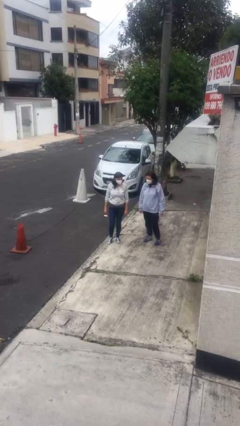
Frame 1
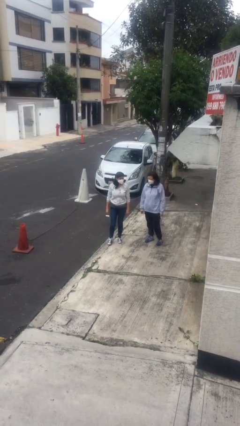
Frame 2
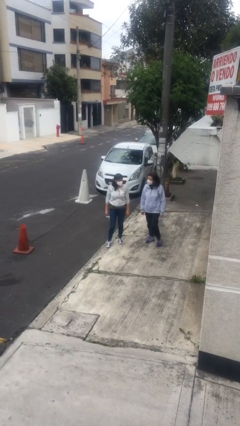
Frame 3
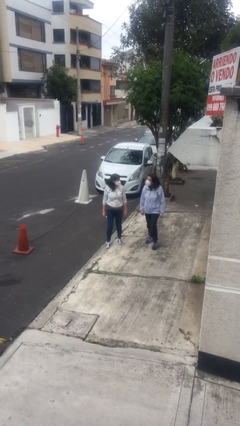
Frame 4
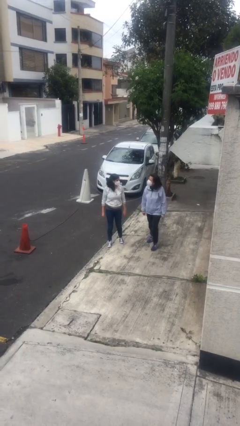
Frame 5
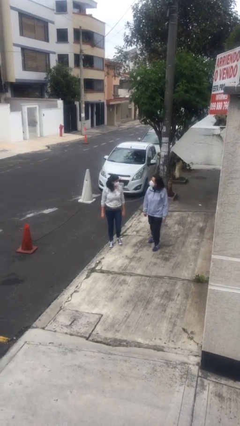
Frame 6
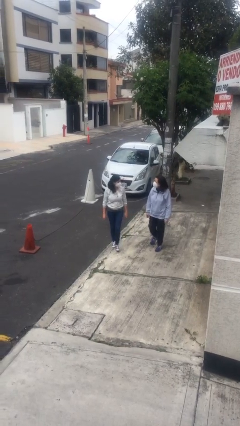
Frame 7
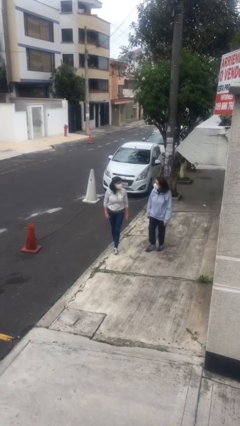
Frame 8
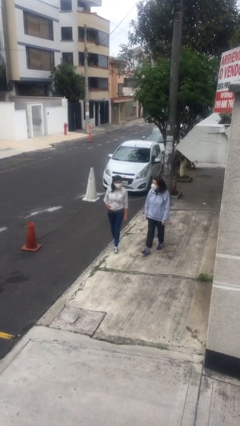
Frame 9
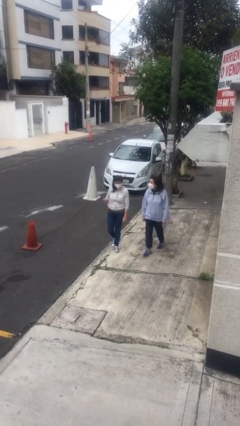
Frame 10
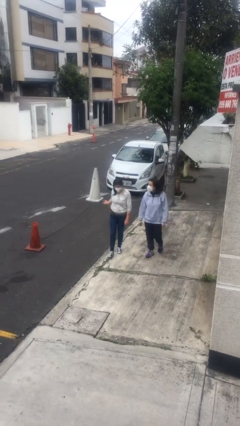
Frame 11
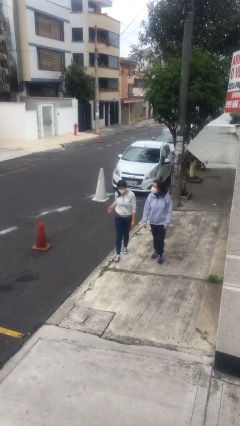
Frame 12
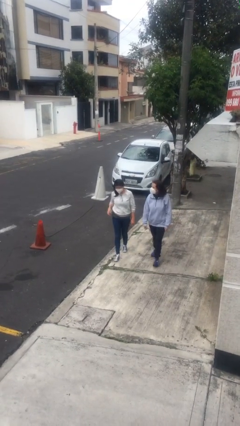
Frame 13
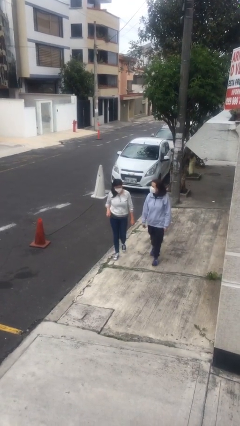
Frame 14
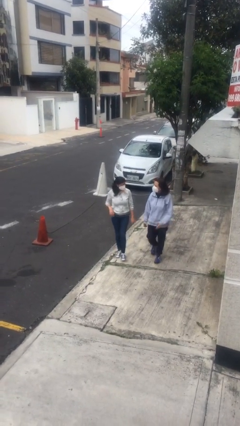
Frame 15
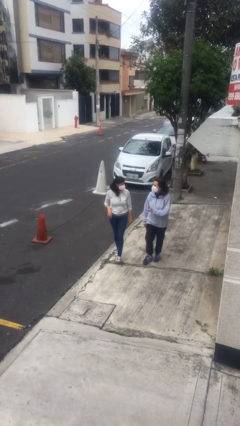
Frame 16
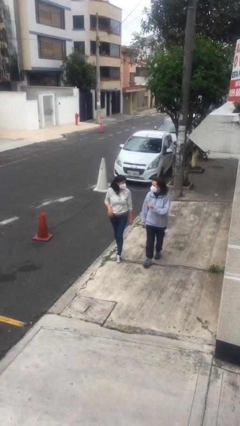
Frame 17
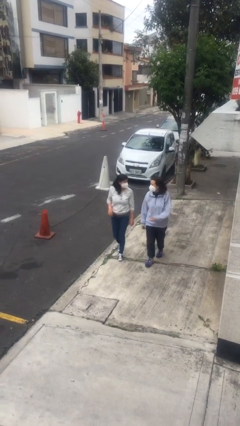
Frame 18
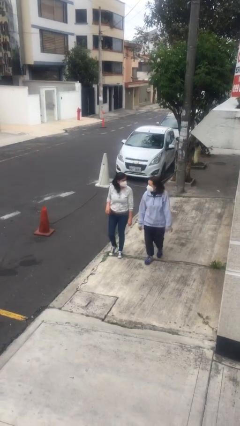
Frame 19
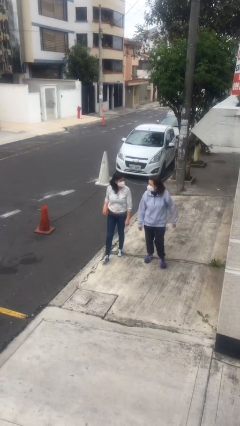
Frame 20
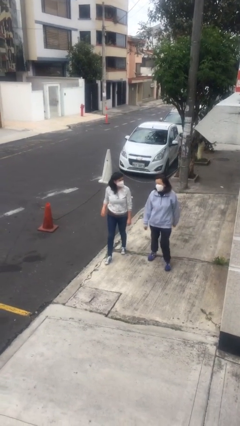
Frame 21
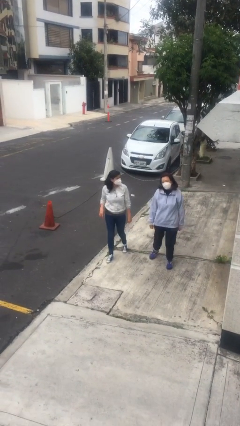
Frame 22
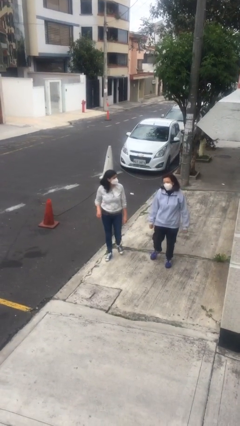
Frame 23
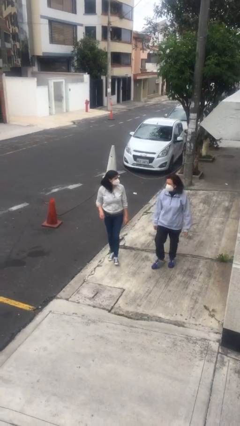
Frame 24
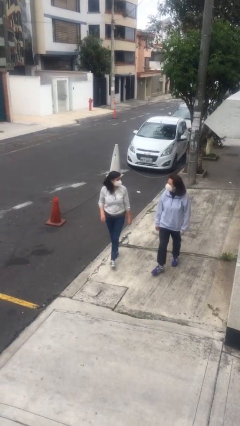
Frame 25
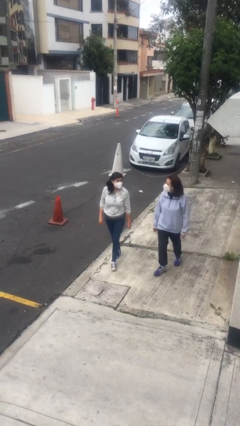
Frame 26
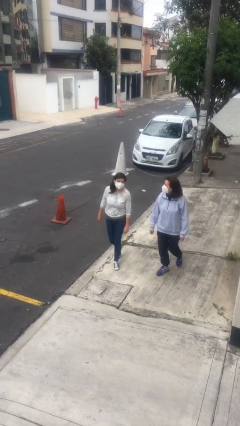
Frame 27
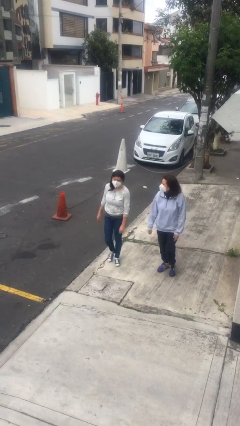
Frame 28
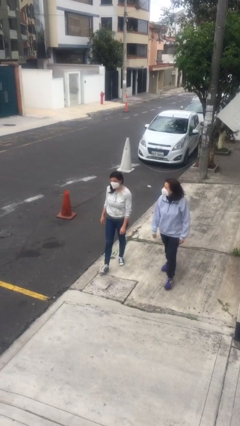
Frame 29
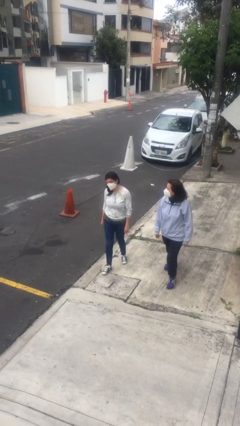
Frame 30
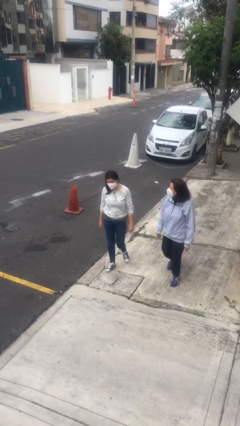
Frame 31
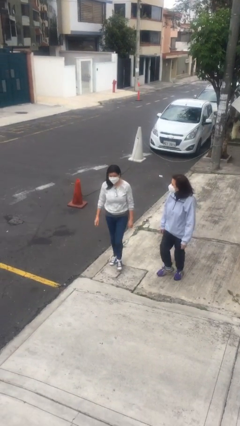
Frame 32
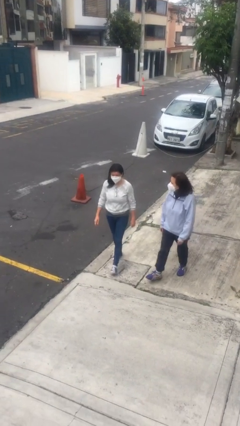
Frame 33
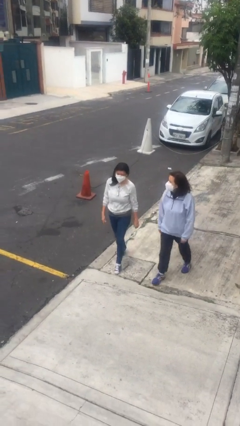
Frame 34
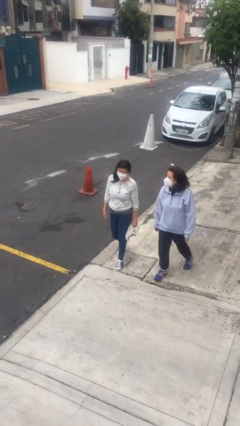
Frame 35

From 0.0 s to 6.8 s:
person talks to person

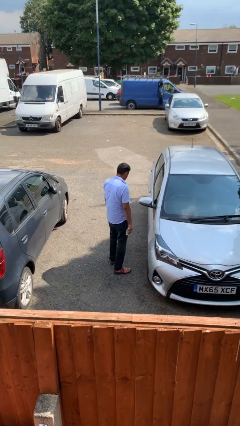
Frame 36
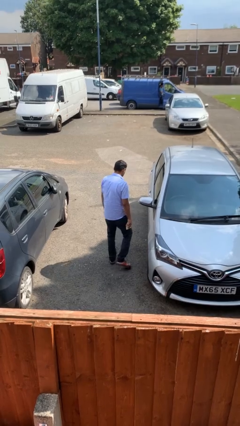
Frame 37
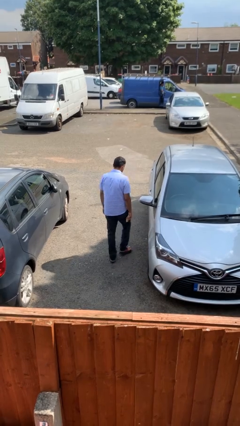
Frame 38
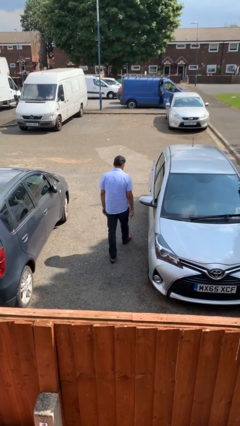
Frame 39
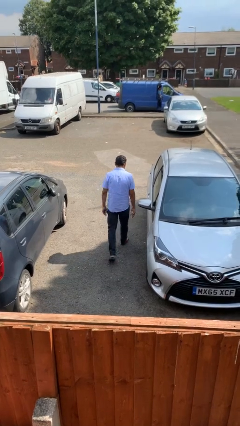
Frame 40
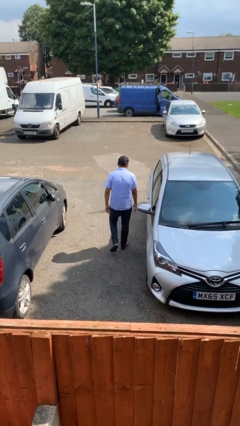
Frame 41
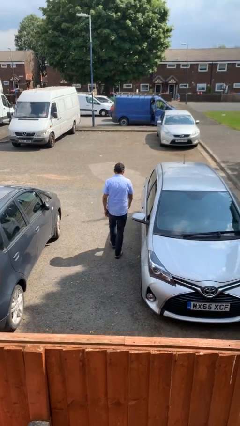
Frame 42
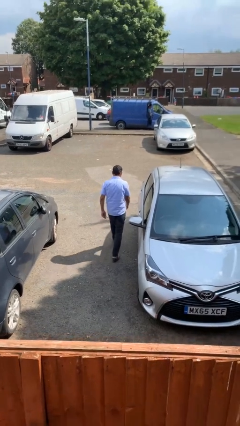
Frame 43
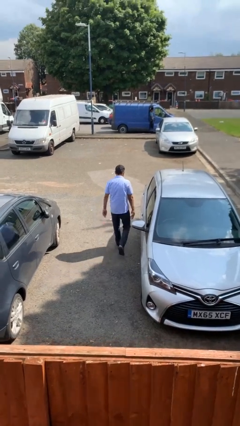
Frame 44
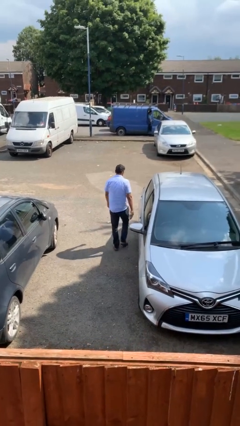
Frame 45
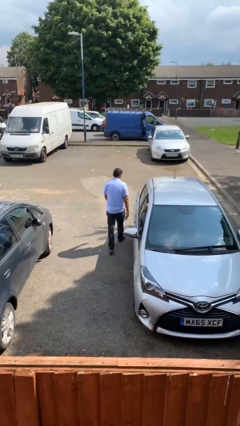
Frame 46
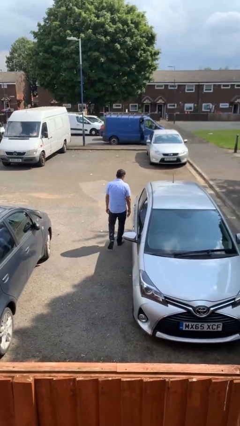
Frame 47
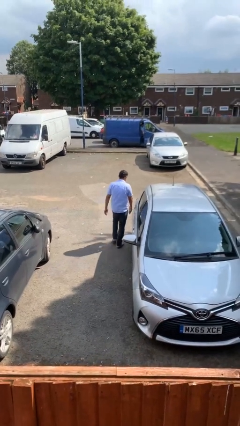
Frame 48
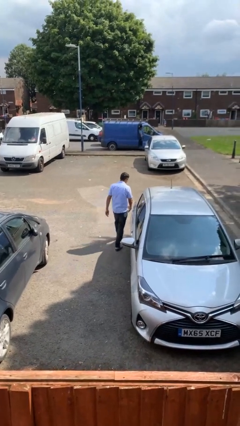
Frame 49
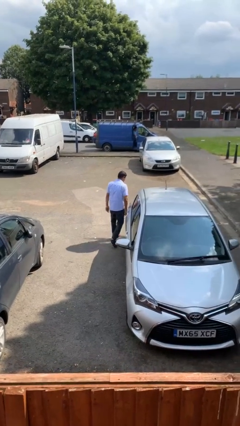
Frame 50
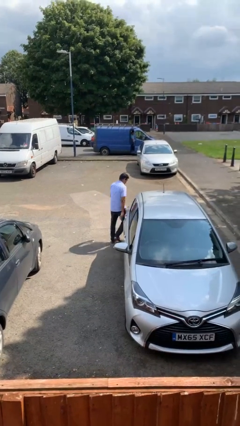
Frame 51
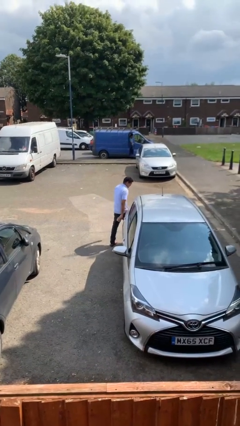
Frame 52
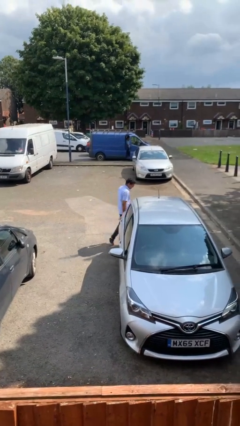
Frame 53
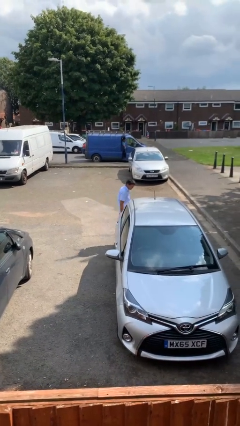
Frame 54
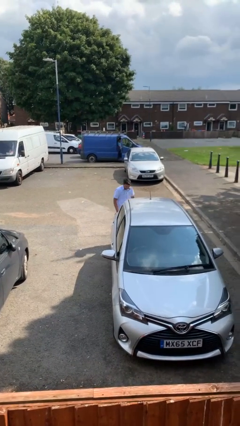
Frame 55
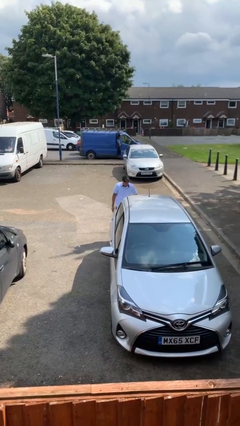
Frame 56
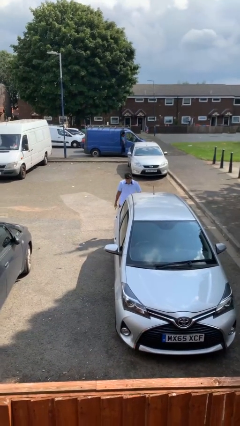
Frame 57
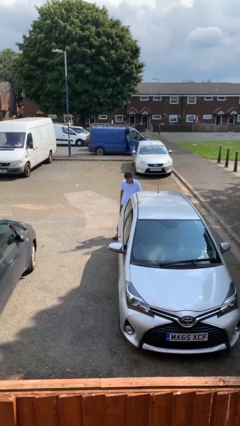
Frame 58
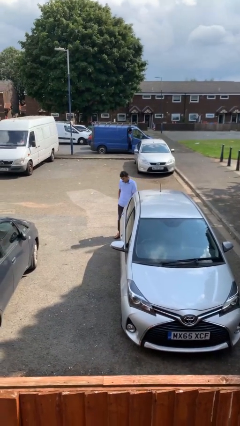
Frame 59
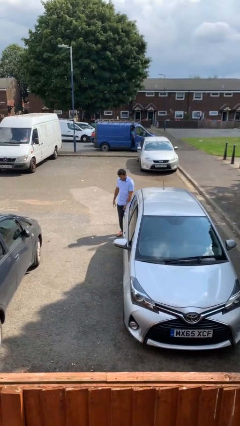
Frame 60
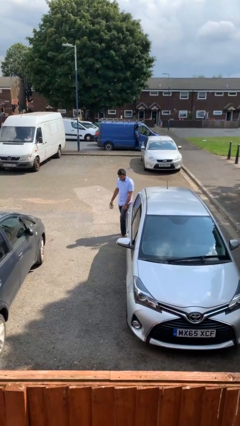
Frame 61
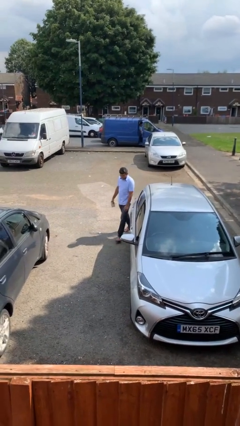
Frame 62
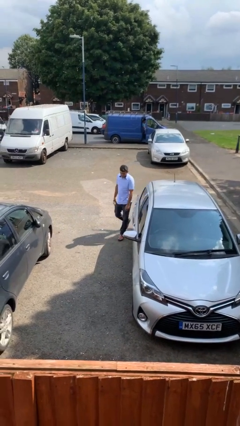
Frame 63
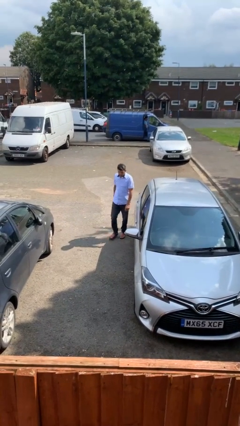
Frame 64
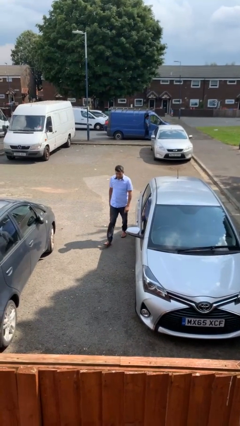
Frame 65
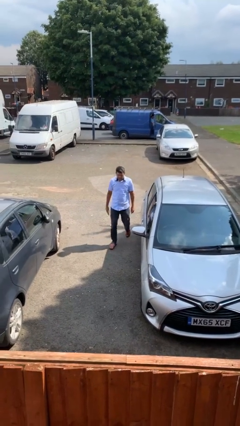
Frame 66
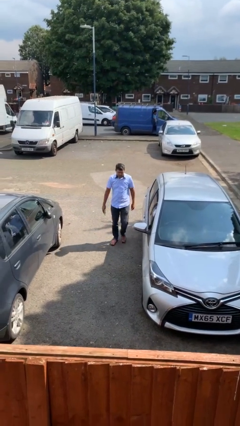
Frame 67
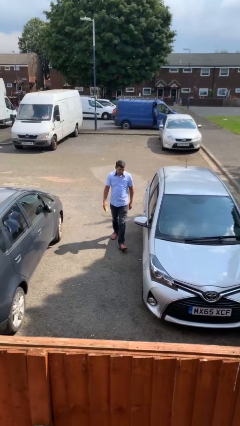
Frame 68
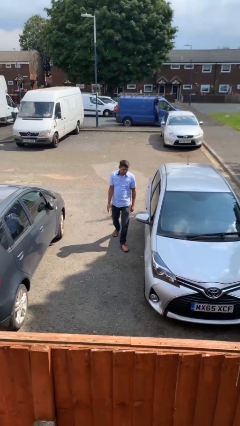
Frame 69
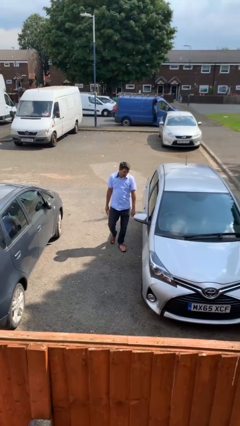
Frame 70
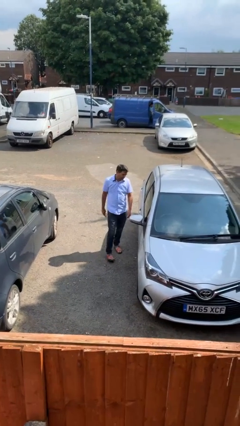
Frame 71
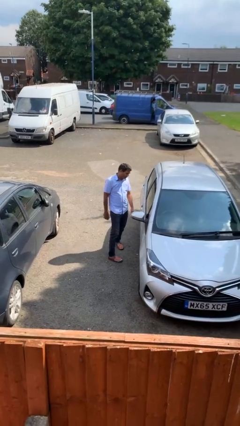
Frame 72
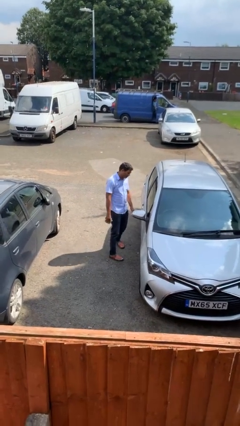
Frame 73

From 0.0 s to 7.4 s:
person walks around car

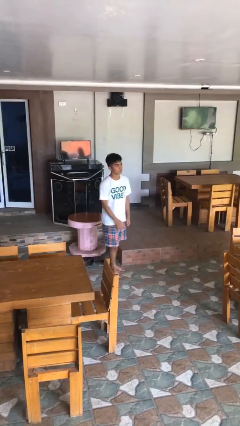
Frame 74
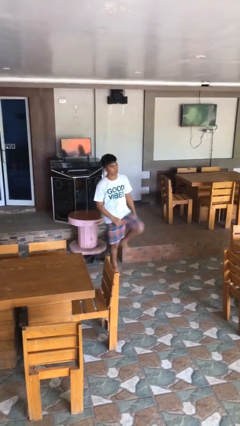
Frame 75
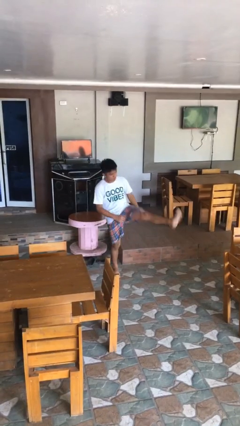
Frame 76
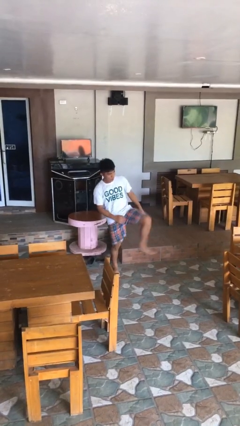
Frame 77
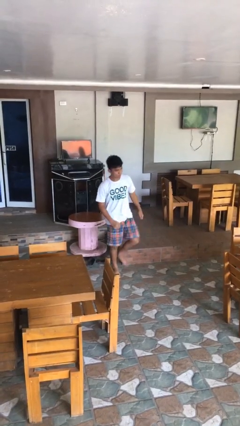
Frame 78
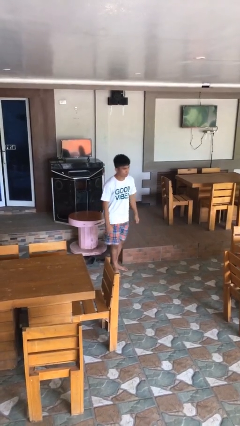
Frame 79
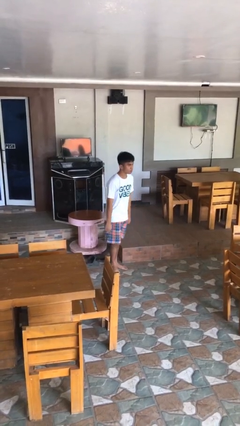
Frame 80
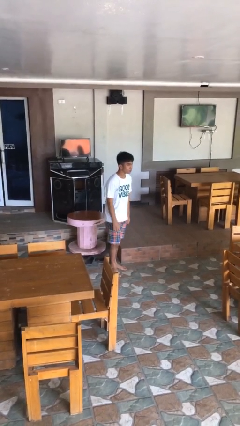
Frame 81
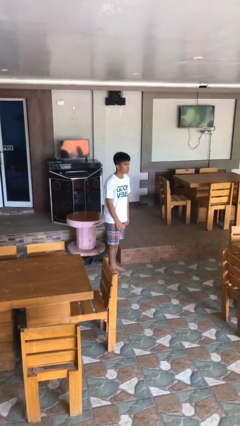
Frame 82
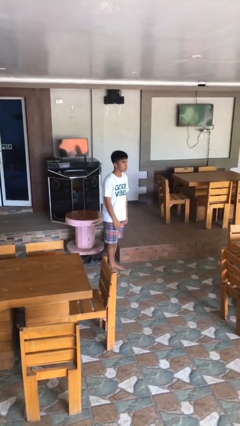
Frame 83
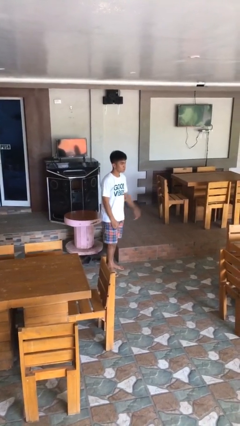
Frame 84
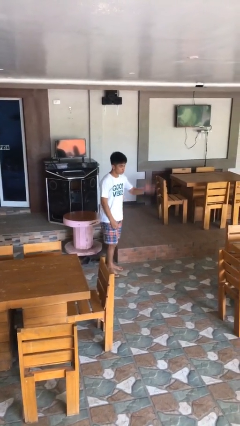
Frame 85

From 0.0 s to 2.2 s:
person karate kicks

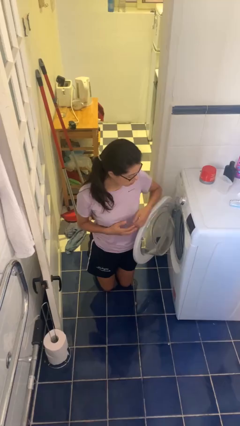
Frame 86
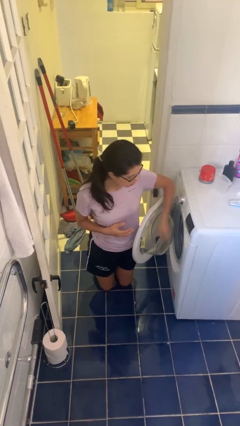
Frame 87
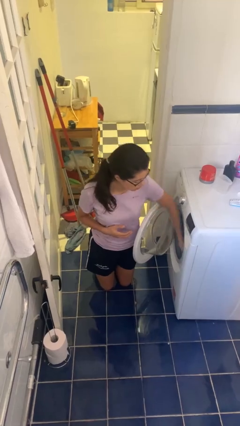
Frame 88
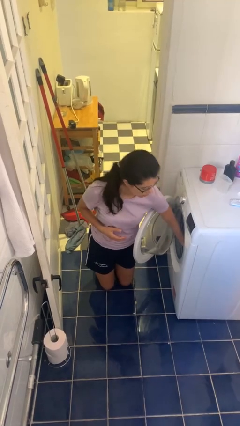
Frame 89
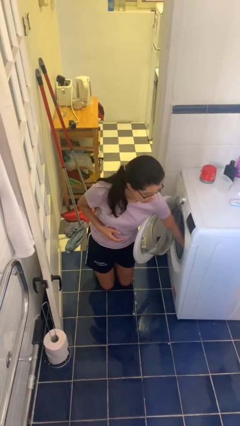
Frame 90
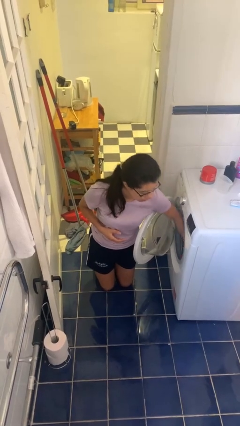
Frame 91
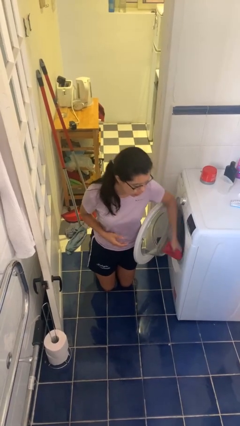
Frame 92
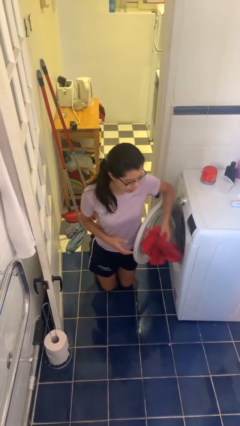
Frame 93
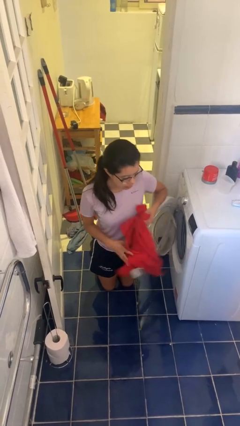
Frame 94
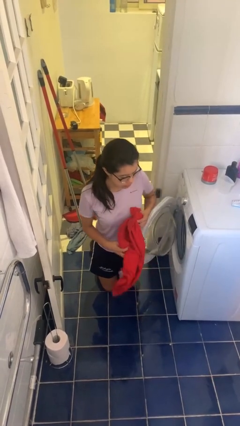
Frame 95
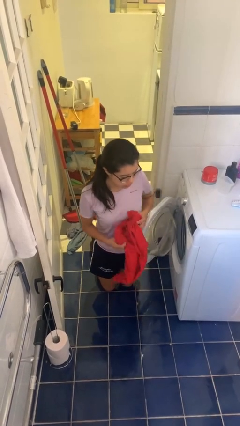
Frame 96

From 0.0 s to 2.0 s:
person unloads dryer
